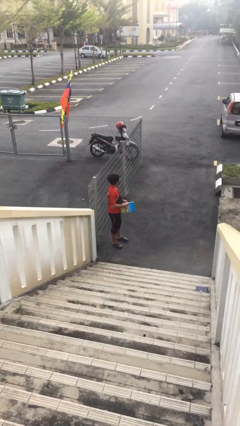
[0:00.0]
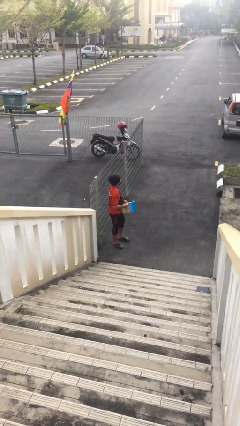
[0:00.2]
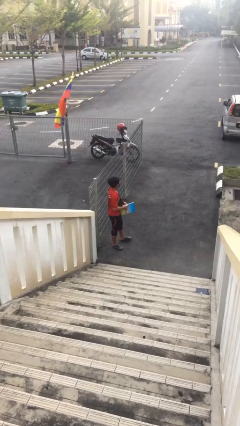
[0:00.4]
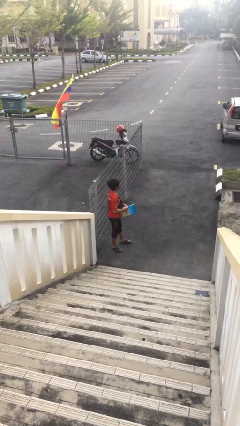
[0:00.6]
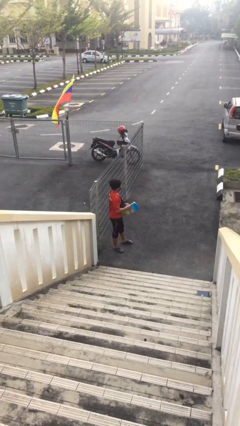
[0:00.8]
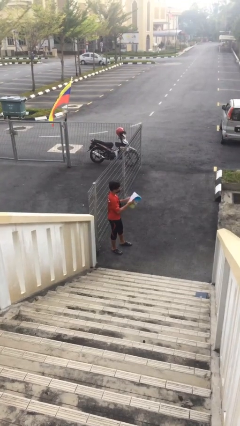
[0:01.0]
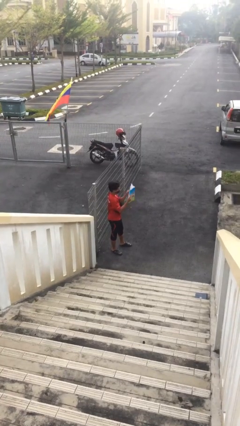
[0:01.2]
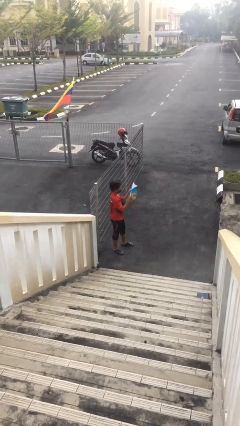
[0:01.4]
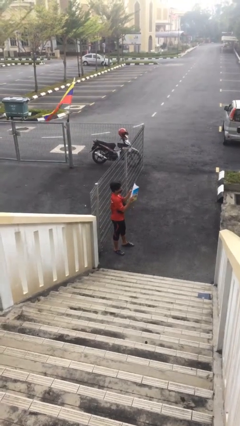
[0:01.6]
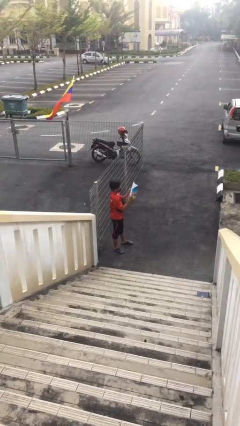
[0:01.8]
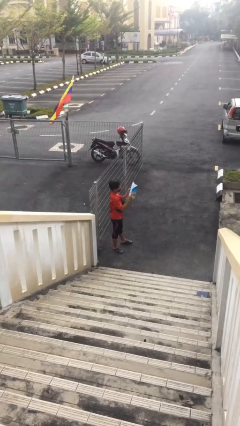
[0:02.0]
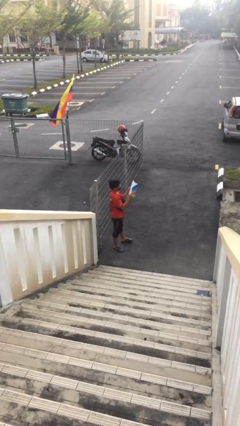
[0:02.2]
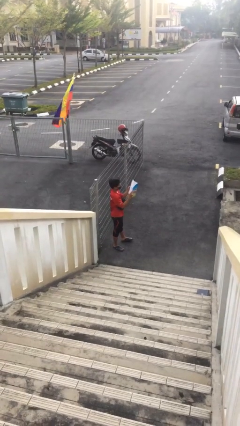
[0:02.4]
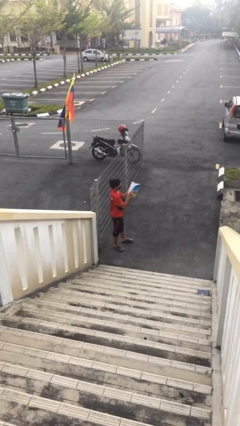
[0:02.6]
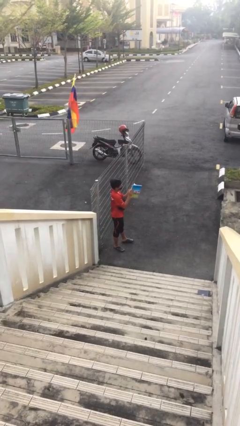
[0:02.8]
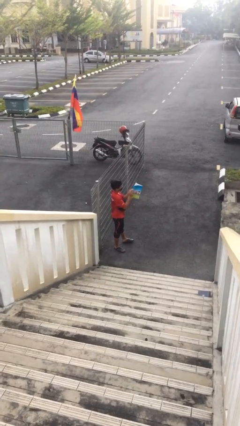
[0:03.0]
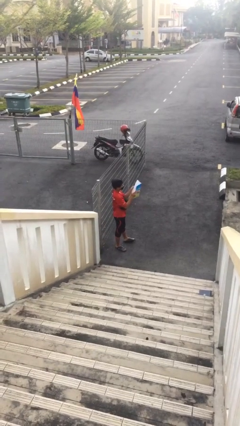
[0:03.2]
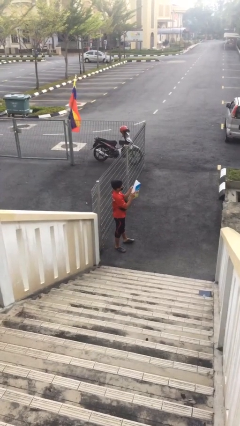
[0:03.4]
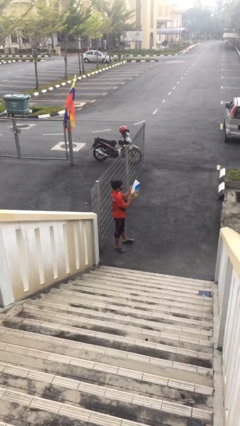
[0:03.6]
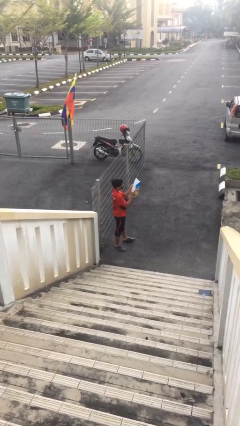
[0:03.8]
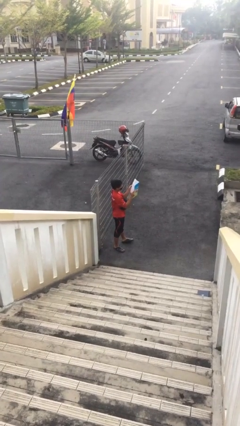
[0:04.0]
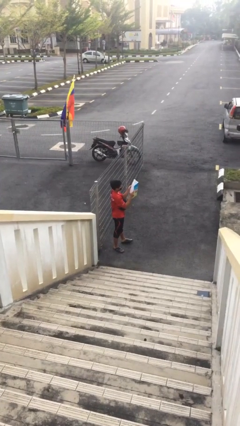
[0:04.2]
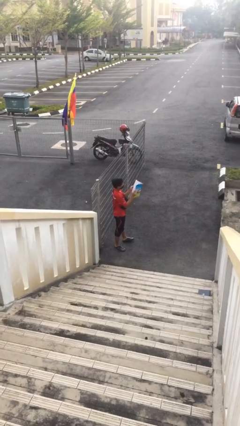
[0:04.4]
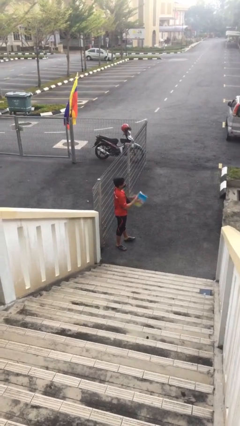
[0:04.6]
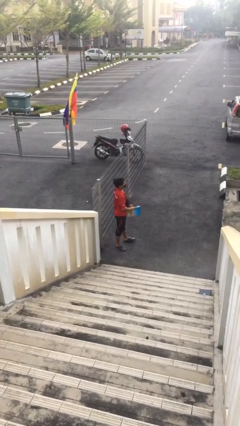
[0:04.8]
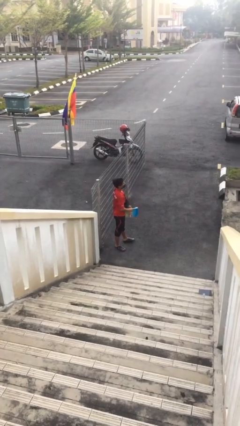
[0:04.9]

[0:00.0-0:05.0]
person reads document

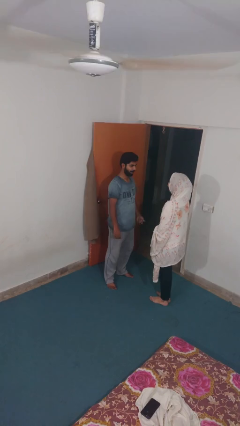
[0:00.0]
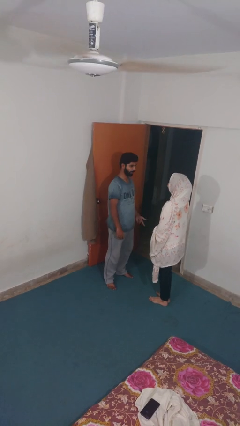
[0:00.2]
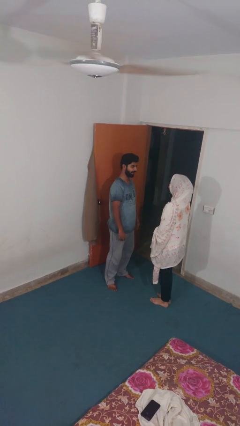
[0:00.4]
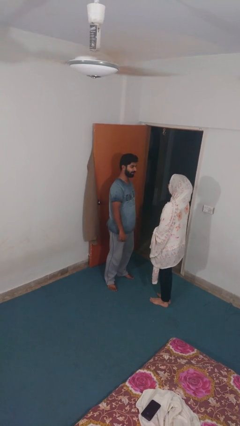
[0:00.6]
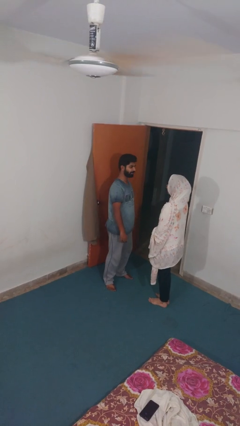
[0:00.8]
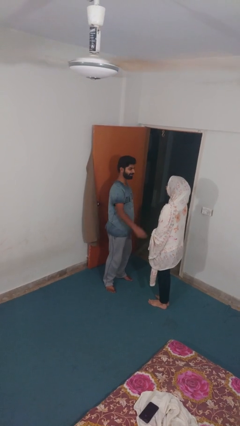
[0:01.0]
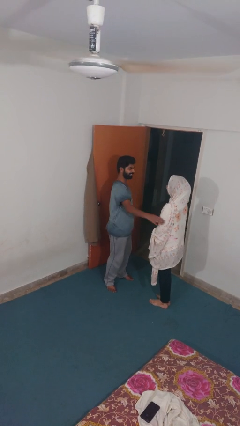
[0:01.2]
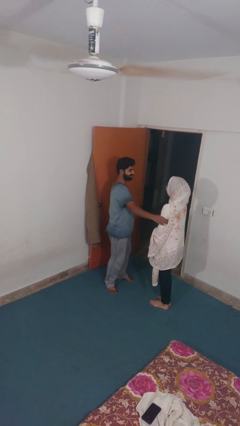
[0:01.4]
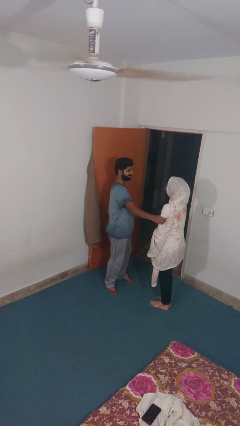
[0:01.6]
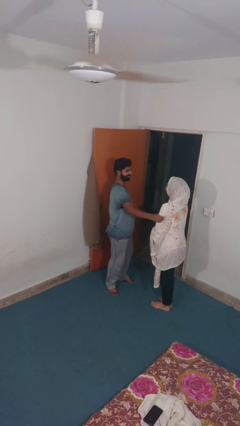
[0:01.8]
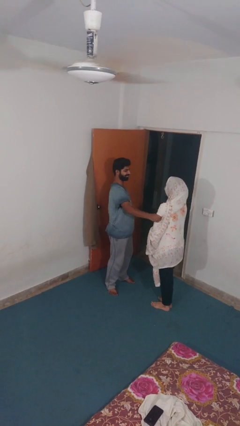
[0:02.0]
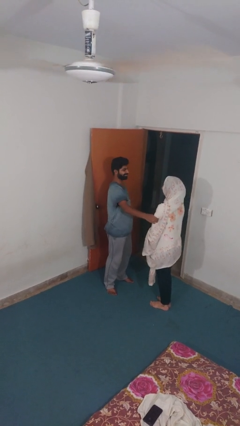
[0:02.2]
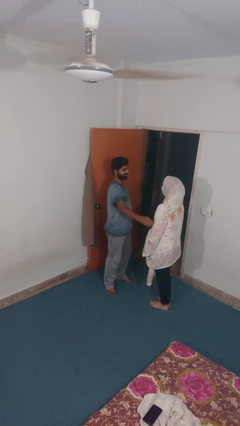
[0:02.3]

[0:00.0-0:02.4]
person grabs person by bicep

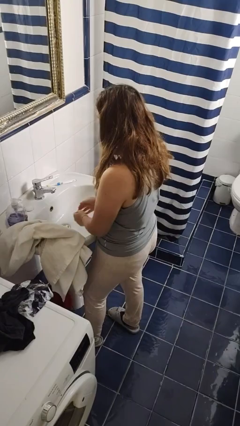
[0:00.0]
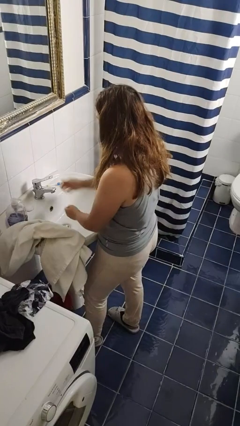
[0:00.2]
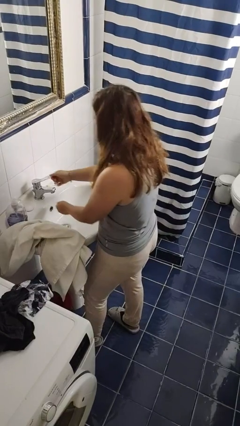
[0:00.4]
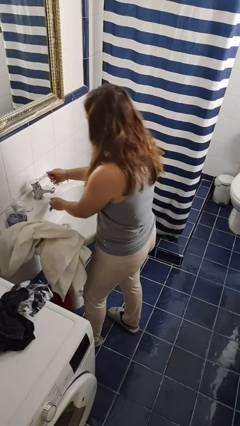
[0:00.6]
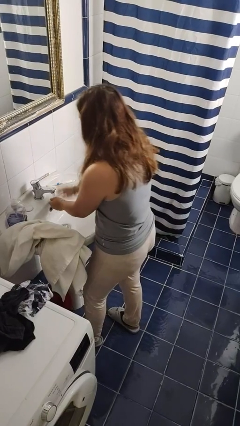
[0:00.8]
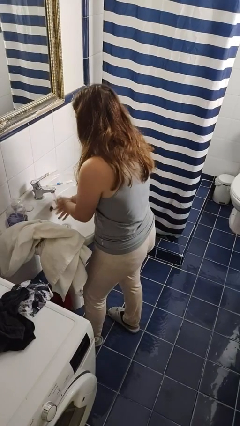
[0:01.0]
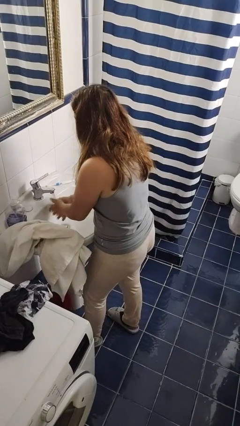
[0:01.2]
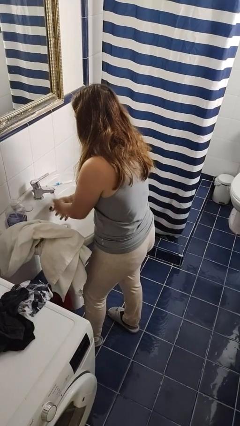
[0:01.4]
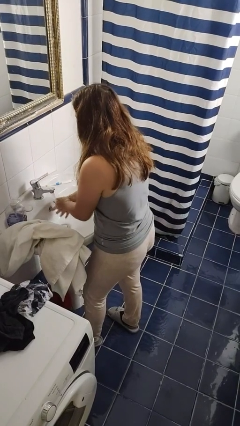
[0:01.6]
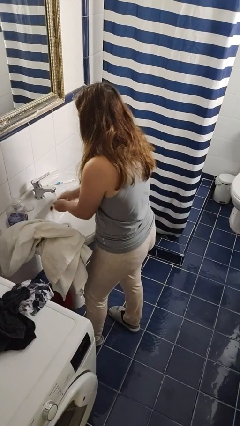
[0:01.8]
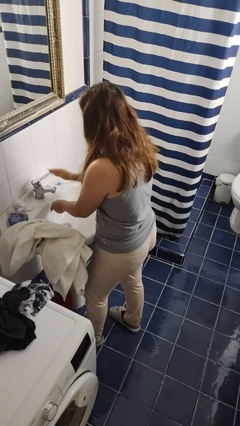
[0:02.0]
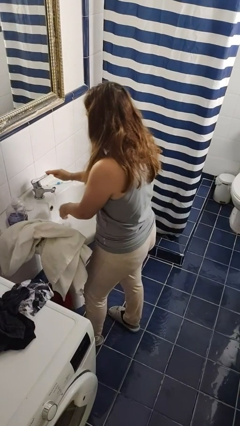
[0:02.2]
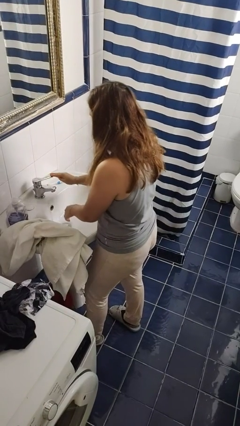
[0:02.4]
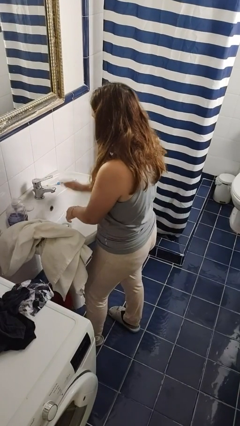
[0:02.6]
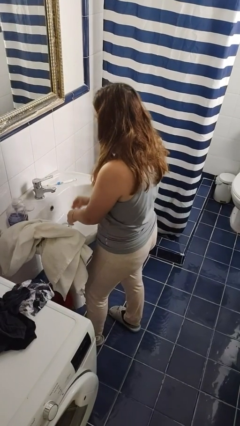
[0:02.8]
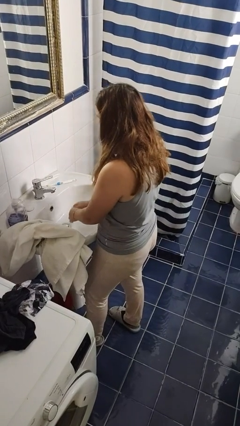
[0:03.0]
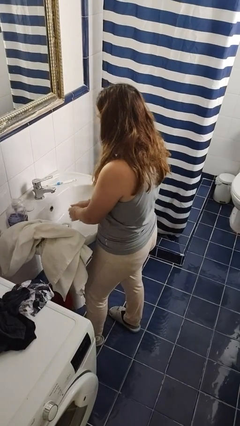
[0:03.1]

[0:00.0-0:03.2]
person washes hands

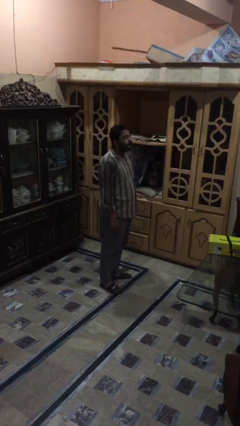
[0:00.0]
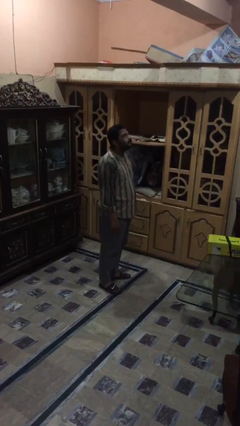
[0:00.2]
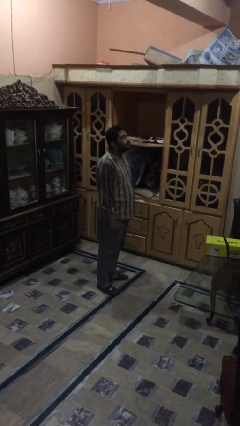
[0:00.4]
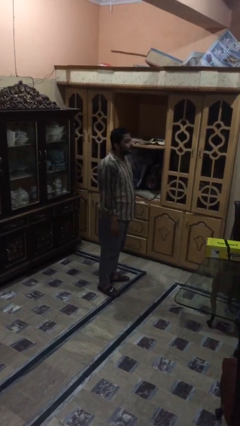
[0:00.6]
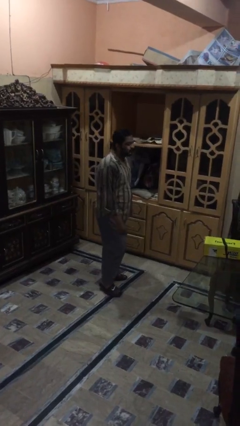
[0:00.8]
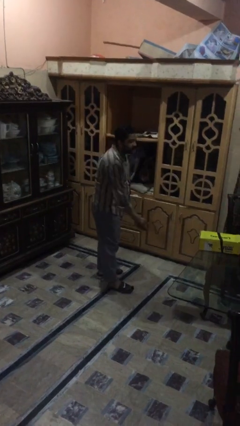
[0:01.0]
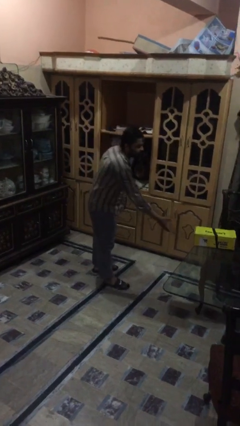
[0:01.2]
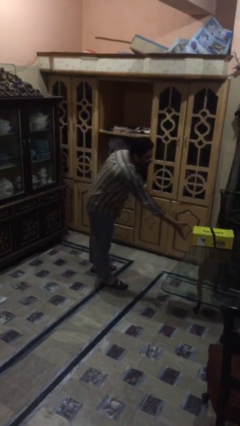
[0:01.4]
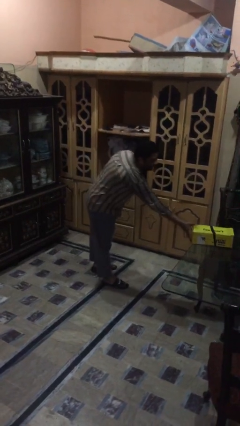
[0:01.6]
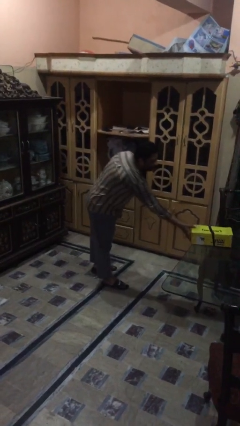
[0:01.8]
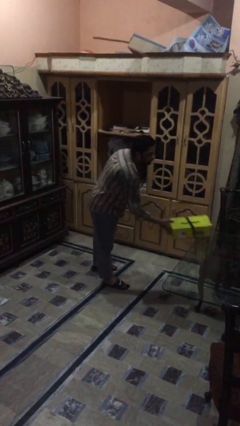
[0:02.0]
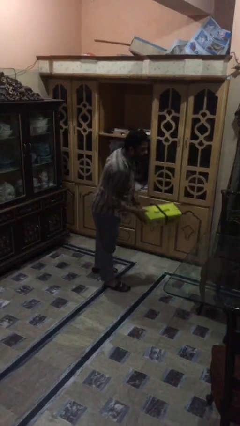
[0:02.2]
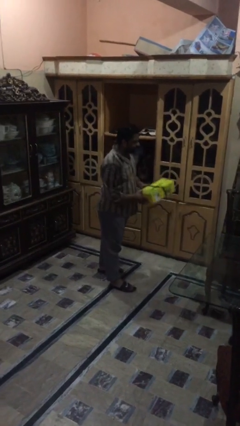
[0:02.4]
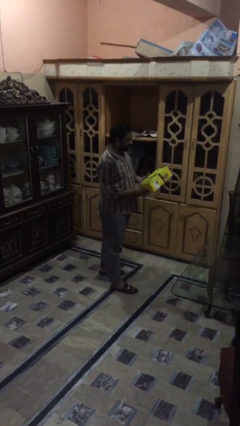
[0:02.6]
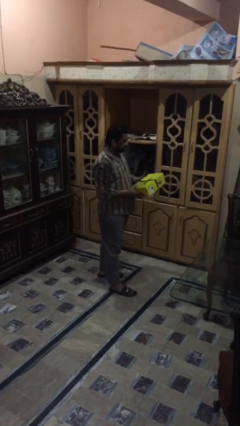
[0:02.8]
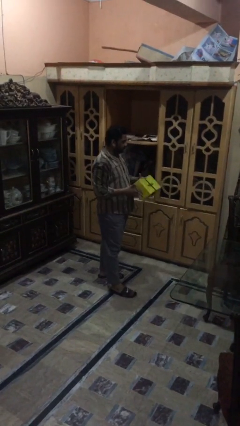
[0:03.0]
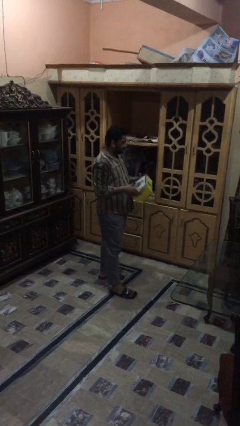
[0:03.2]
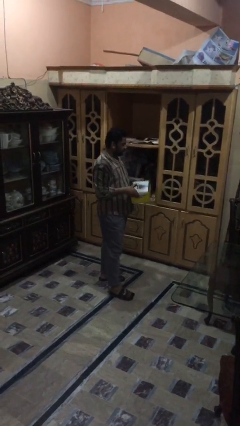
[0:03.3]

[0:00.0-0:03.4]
person picks up object from table

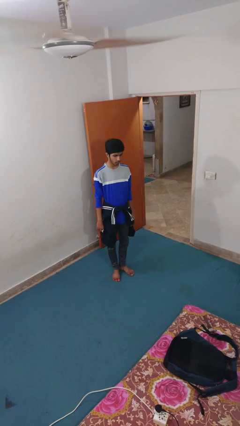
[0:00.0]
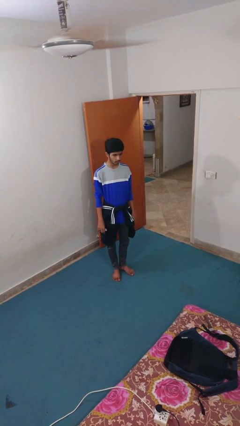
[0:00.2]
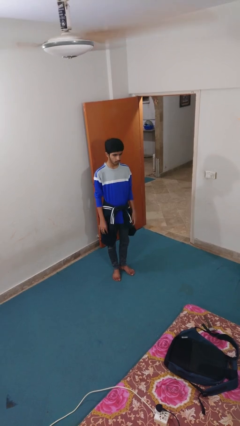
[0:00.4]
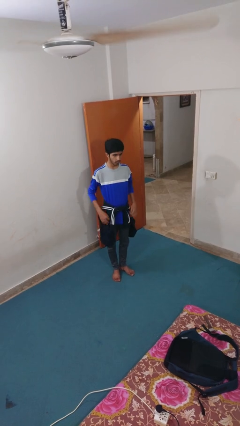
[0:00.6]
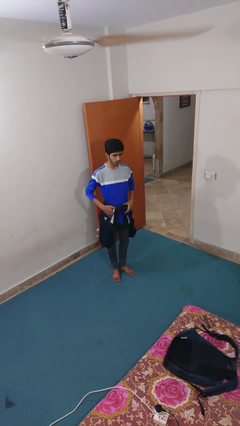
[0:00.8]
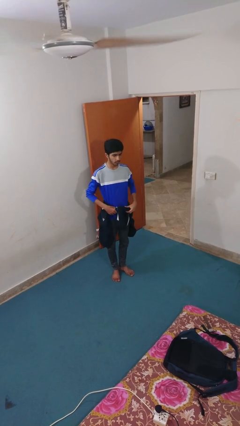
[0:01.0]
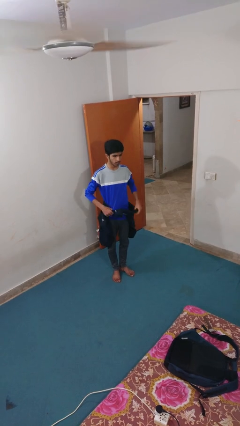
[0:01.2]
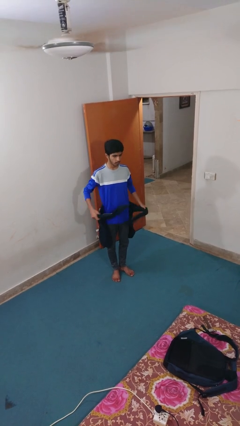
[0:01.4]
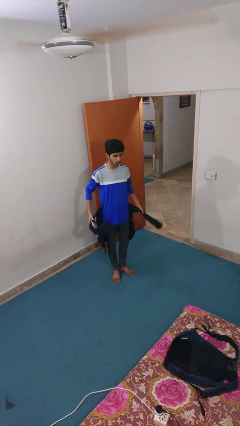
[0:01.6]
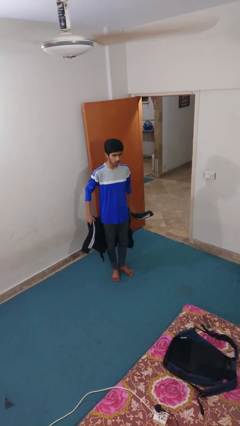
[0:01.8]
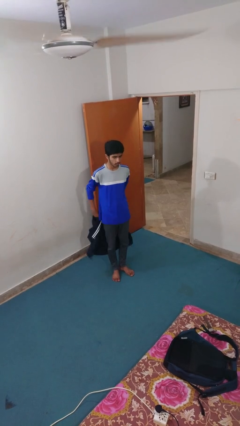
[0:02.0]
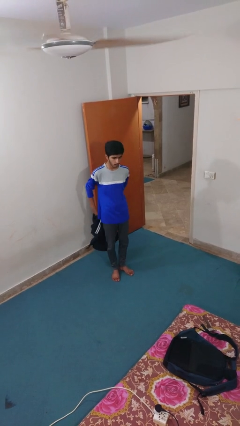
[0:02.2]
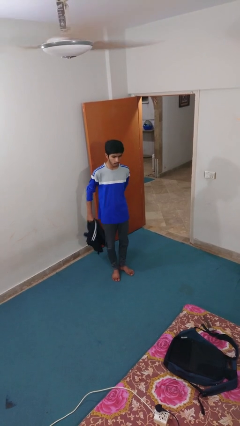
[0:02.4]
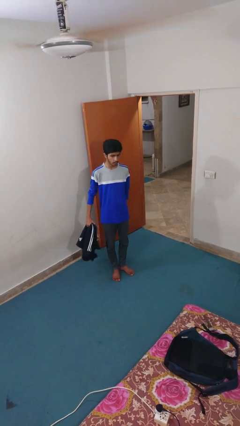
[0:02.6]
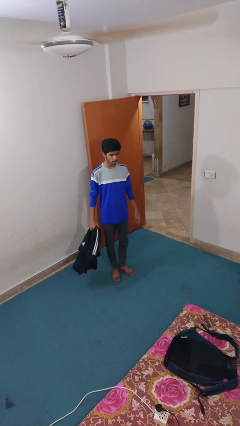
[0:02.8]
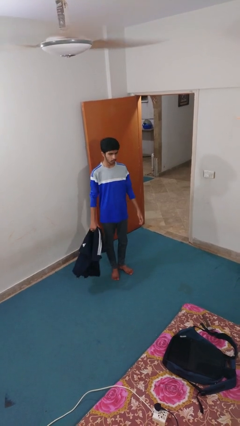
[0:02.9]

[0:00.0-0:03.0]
person unties jacket around waist

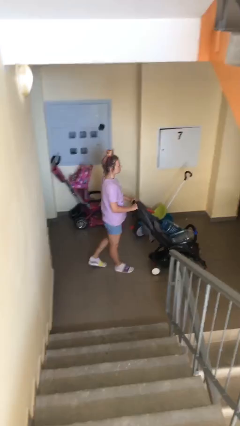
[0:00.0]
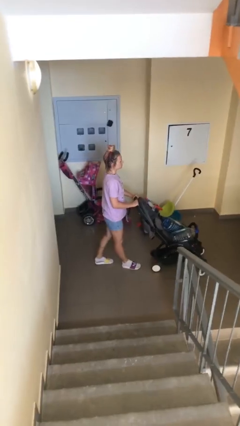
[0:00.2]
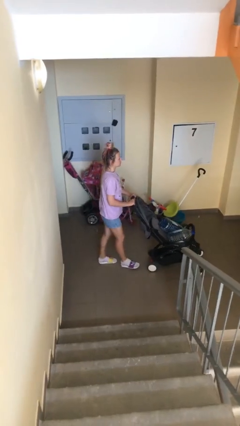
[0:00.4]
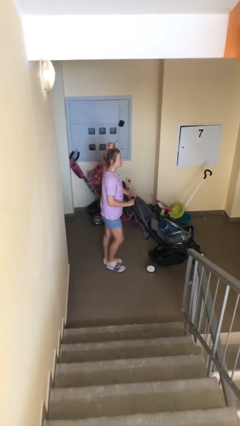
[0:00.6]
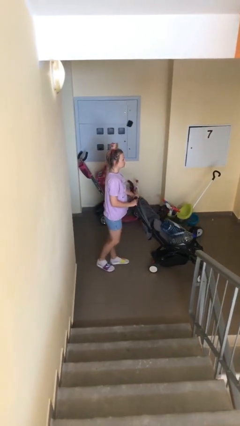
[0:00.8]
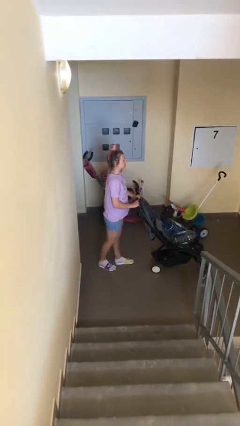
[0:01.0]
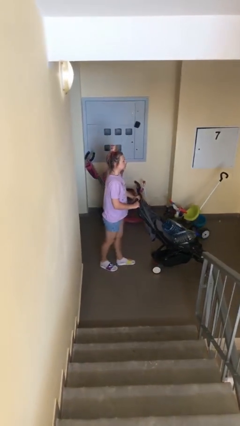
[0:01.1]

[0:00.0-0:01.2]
person pulls wheeled cart
